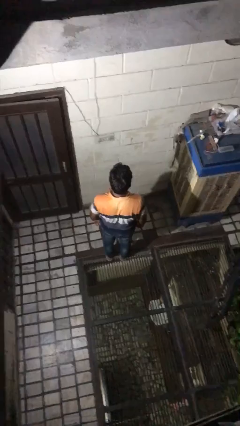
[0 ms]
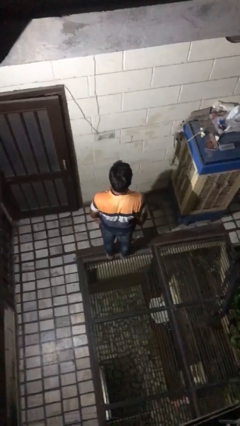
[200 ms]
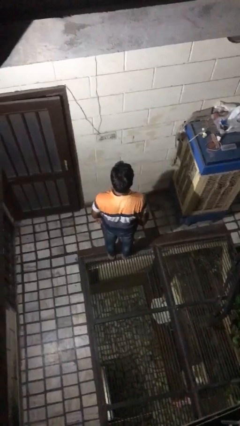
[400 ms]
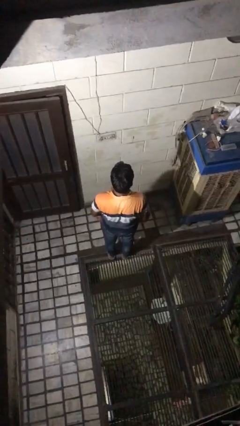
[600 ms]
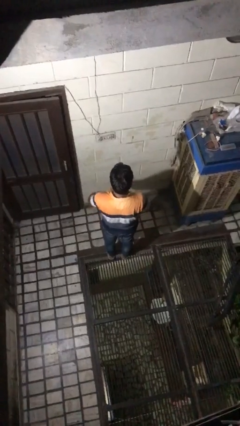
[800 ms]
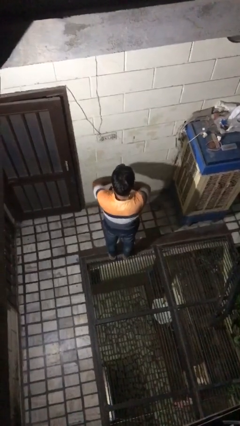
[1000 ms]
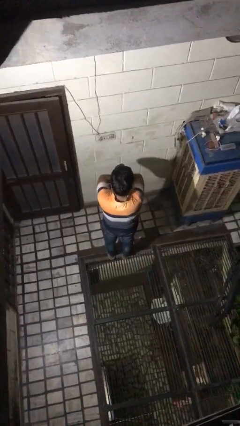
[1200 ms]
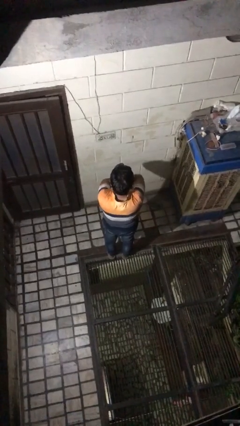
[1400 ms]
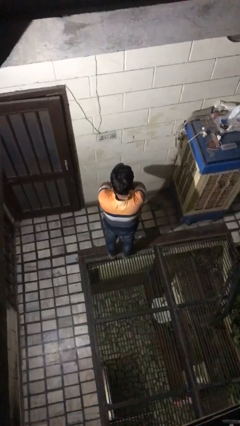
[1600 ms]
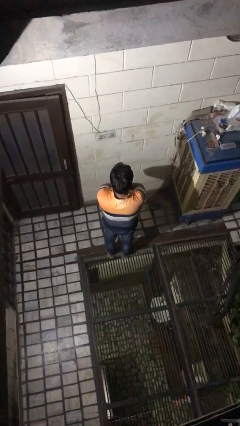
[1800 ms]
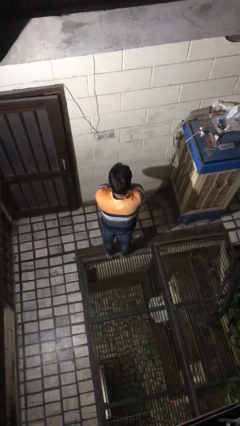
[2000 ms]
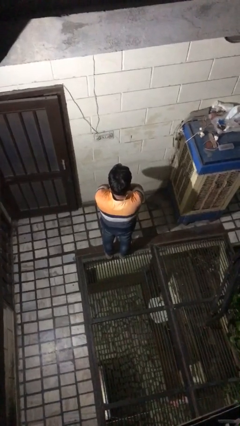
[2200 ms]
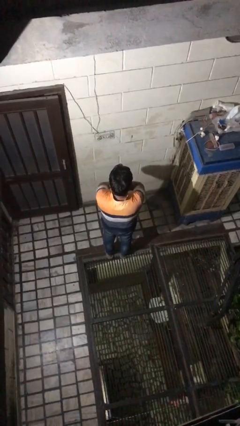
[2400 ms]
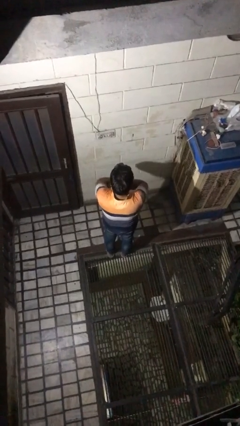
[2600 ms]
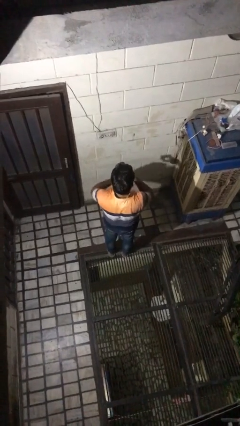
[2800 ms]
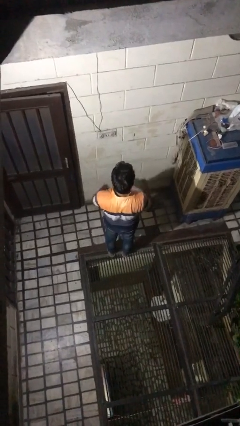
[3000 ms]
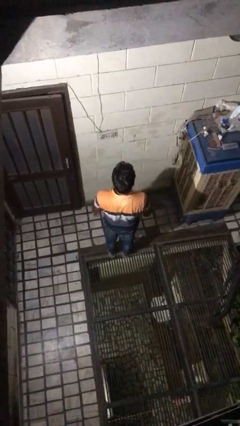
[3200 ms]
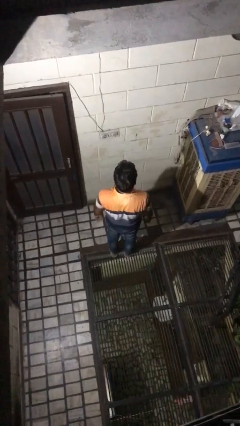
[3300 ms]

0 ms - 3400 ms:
person crosses arms

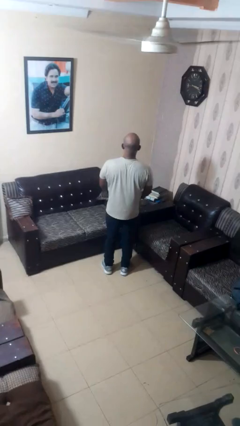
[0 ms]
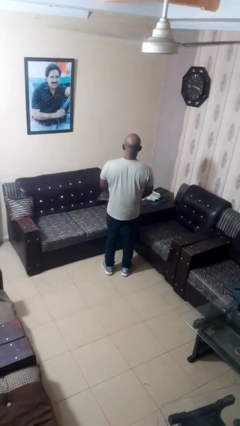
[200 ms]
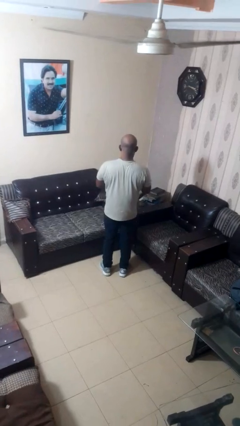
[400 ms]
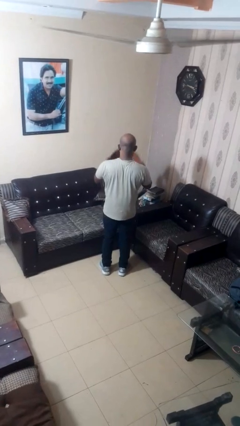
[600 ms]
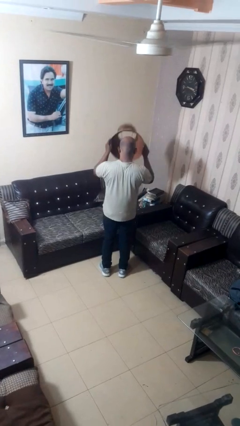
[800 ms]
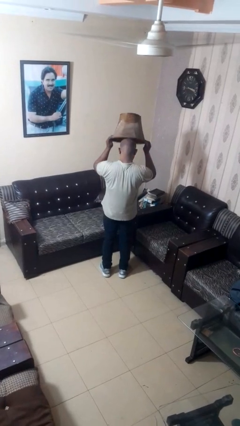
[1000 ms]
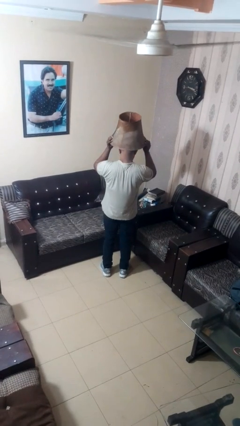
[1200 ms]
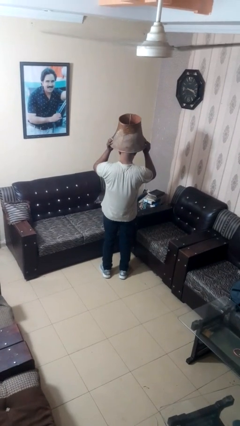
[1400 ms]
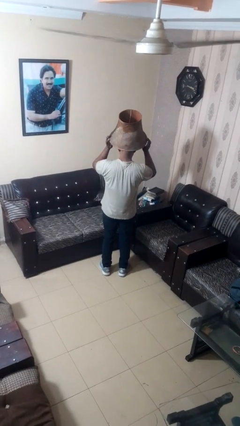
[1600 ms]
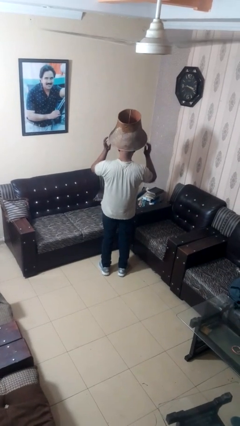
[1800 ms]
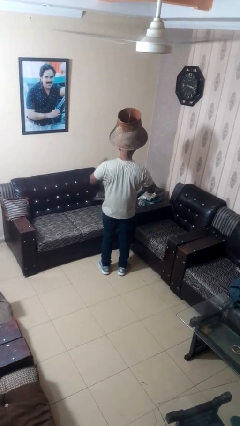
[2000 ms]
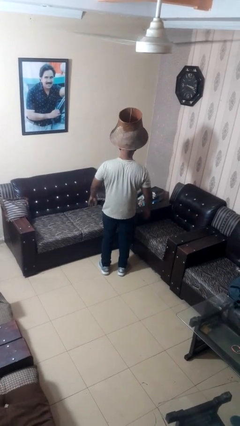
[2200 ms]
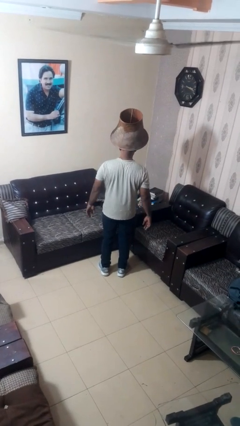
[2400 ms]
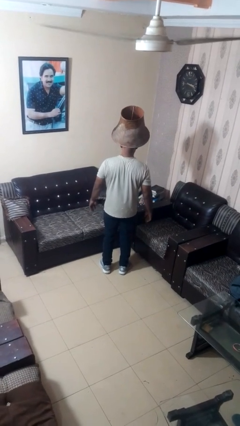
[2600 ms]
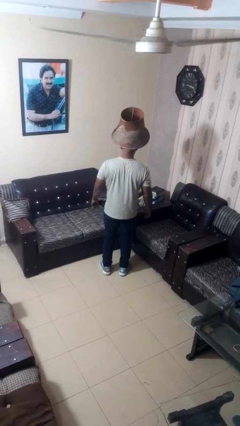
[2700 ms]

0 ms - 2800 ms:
person puts on hat

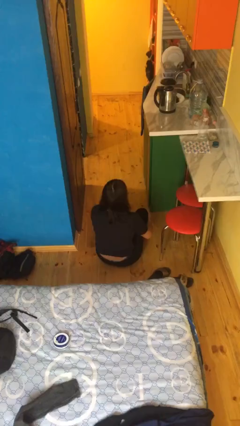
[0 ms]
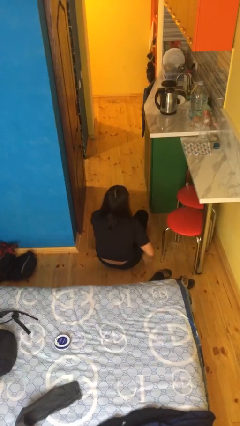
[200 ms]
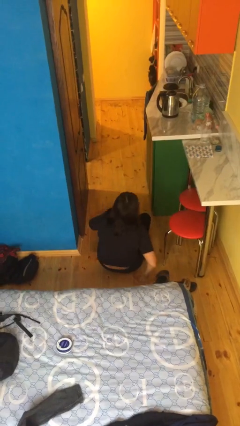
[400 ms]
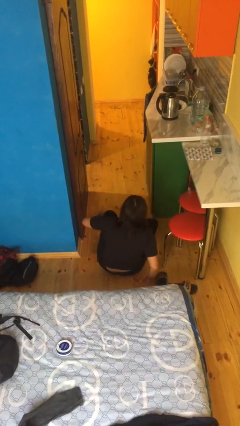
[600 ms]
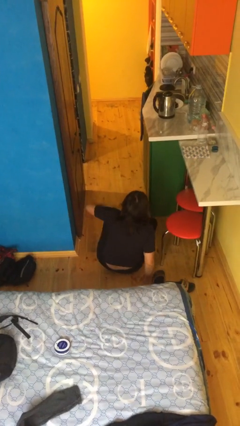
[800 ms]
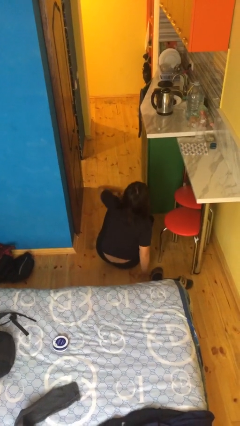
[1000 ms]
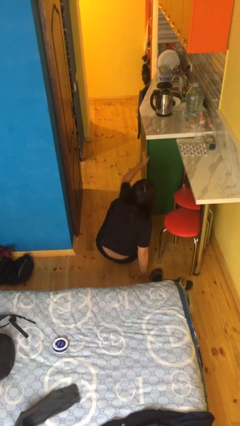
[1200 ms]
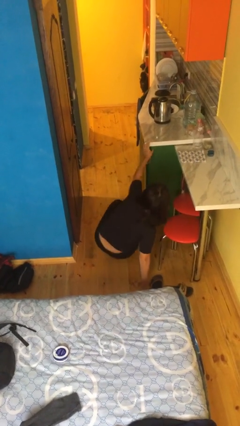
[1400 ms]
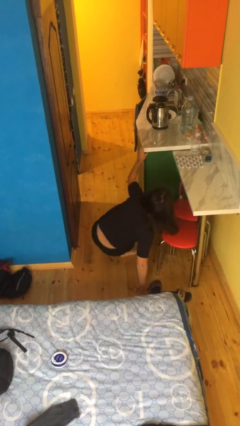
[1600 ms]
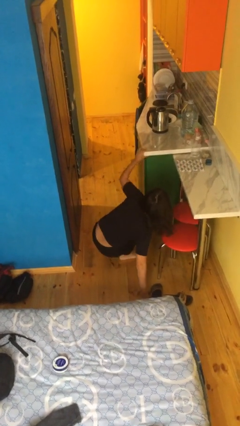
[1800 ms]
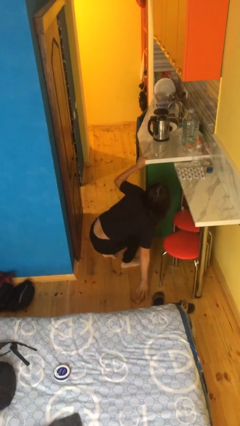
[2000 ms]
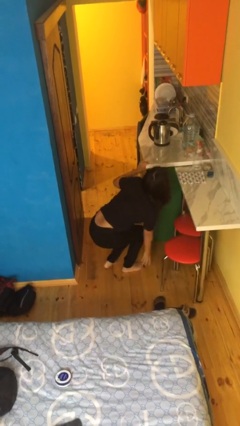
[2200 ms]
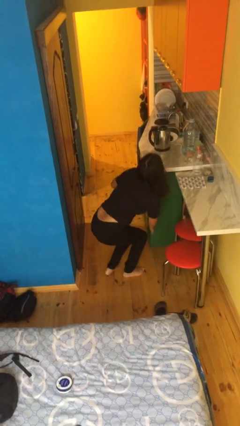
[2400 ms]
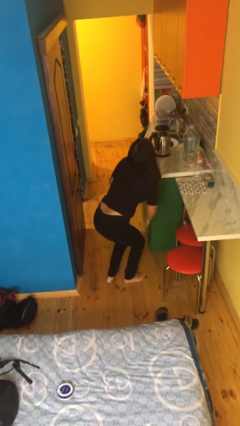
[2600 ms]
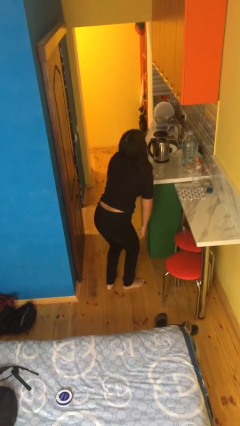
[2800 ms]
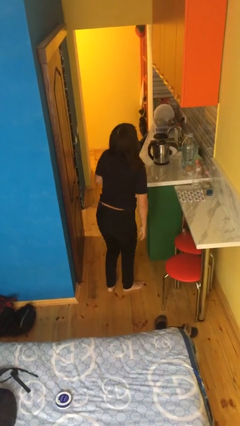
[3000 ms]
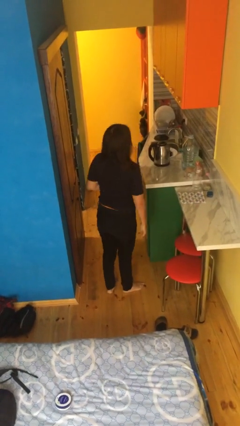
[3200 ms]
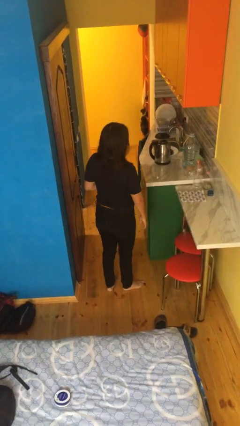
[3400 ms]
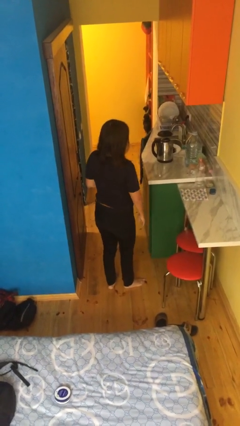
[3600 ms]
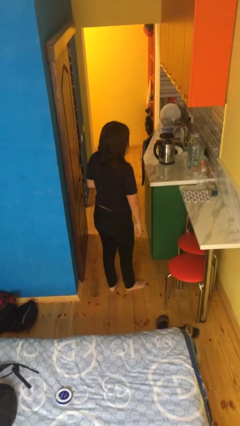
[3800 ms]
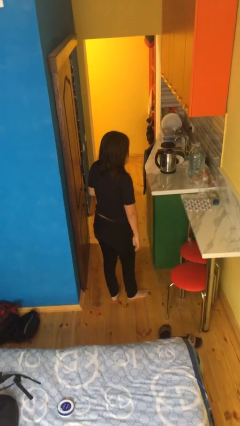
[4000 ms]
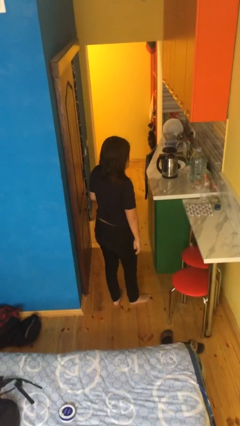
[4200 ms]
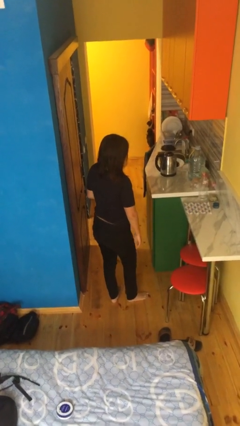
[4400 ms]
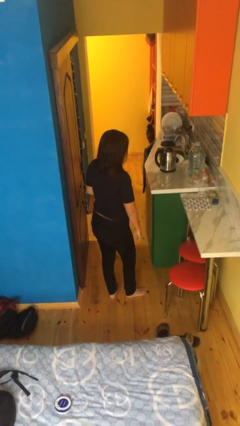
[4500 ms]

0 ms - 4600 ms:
person stands up from floor

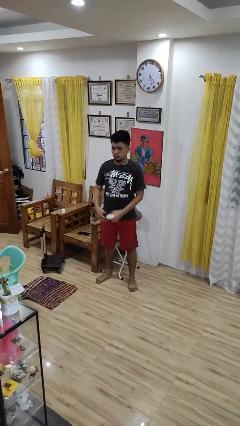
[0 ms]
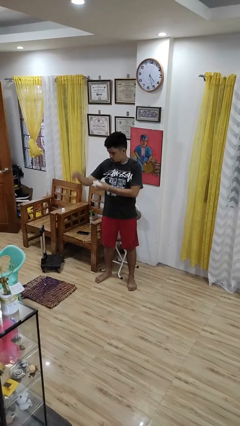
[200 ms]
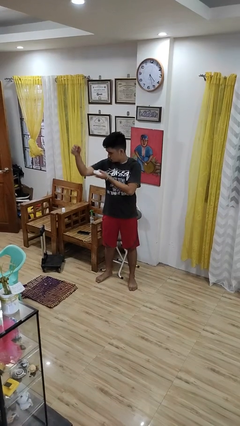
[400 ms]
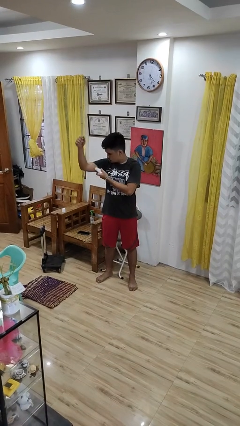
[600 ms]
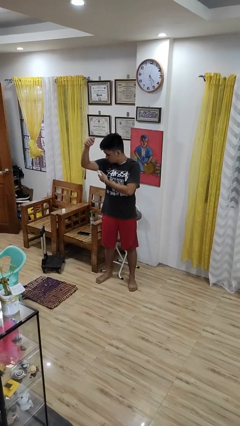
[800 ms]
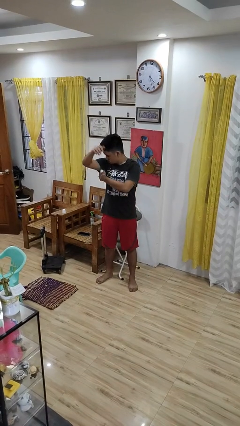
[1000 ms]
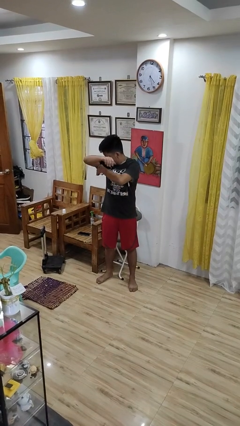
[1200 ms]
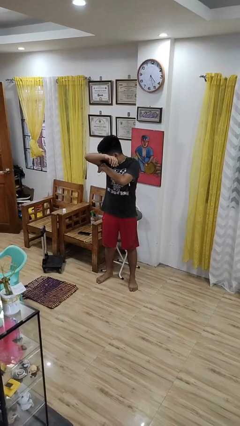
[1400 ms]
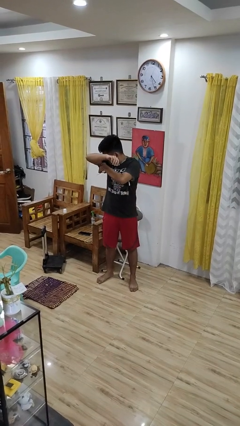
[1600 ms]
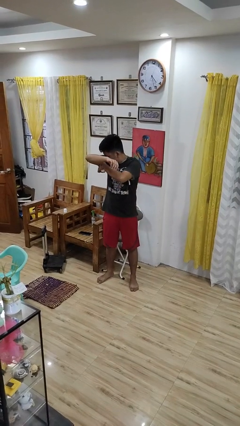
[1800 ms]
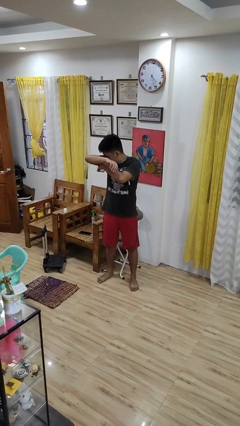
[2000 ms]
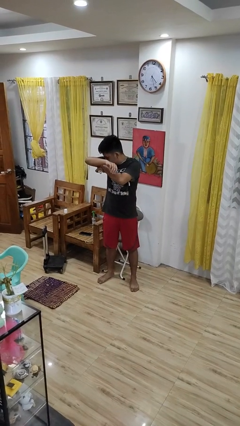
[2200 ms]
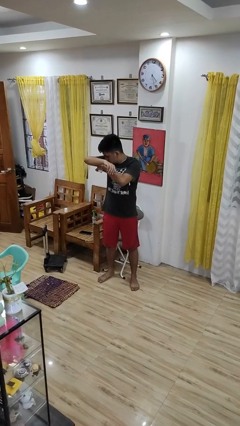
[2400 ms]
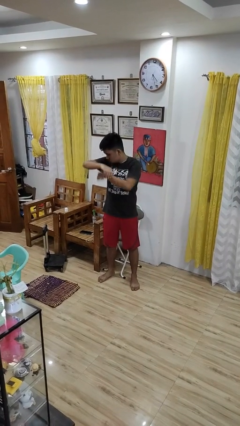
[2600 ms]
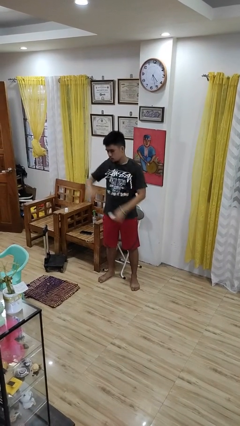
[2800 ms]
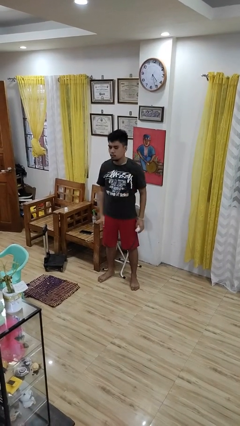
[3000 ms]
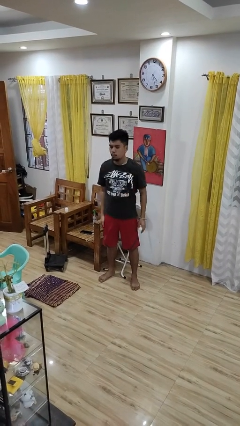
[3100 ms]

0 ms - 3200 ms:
person applies deodorant

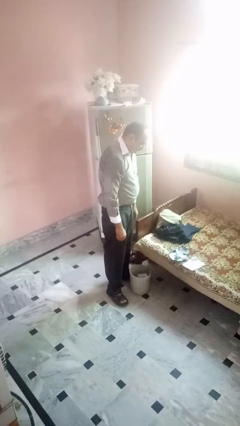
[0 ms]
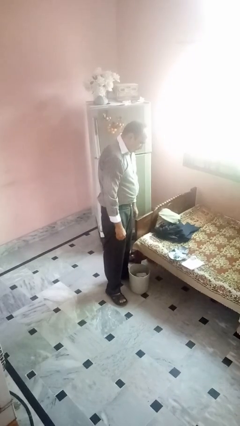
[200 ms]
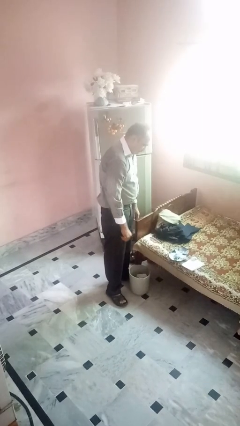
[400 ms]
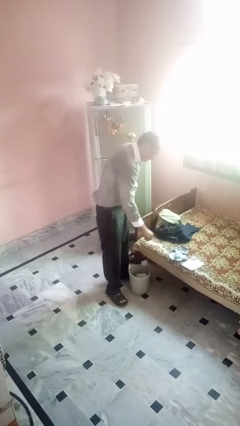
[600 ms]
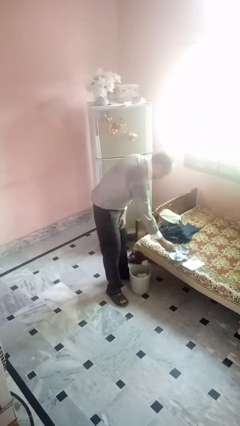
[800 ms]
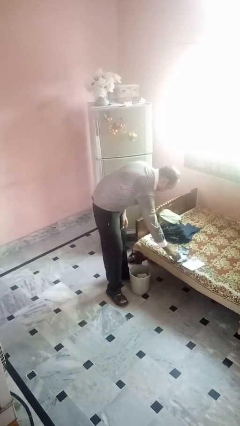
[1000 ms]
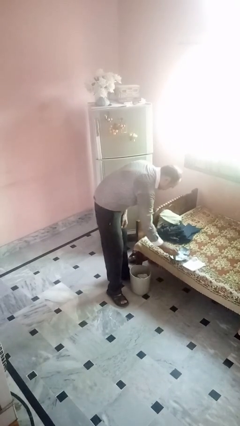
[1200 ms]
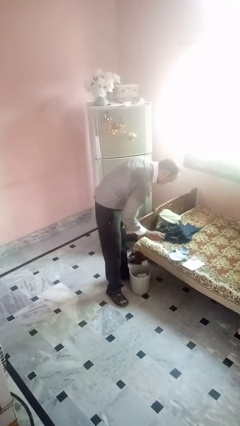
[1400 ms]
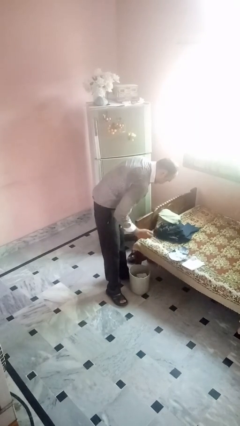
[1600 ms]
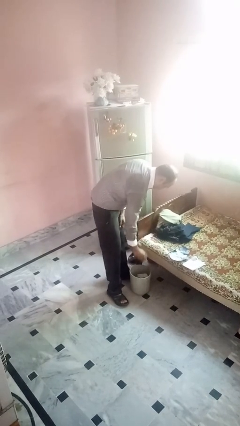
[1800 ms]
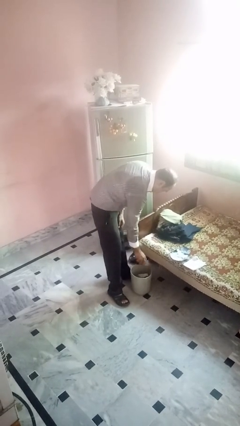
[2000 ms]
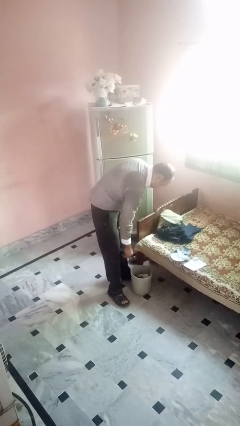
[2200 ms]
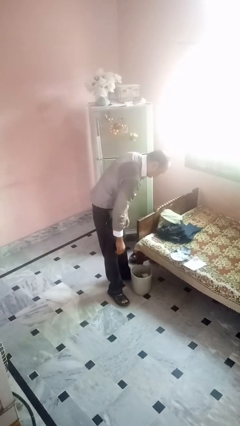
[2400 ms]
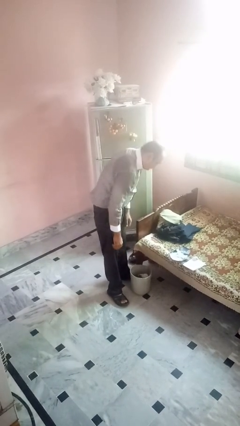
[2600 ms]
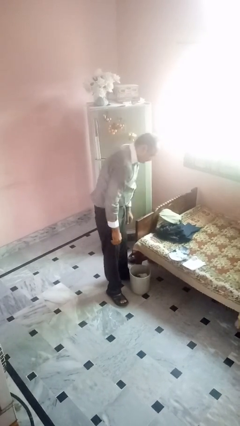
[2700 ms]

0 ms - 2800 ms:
person discards trash

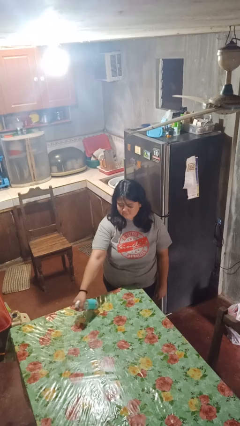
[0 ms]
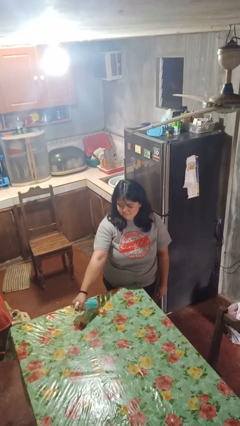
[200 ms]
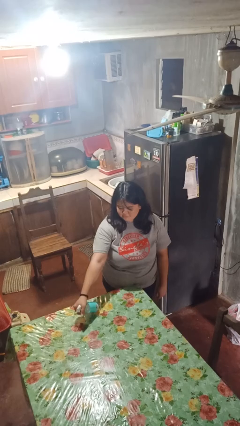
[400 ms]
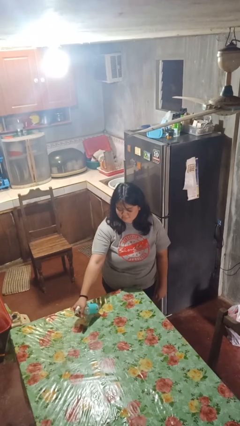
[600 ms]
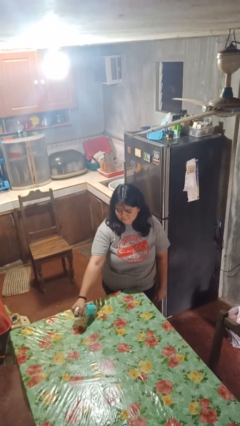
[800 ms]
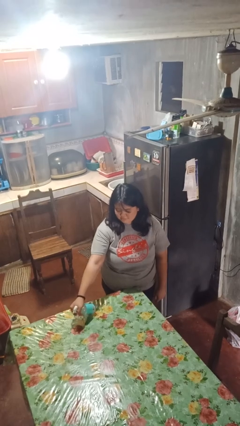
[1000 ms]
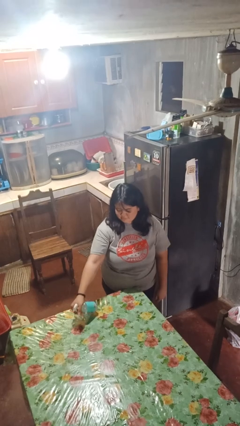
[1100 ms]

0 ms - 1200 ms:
person sprays from bottle
